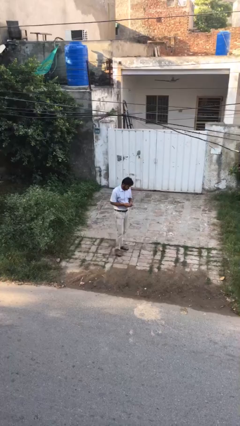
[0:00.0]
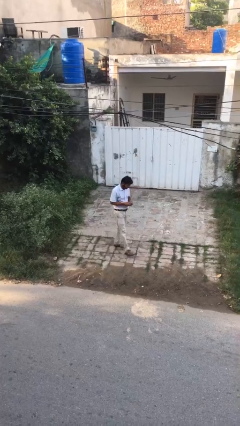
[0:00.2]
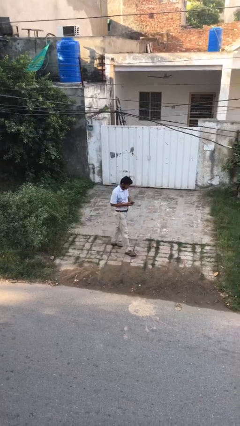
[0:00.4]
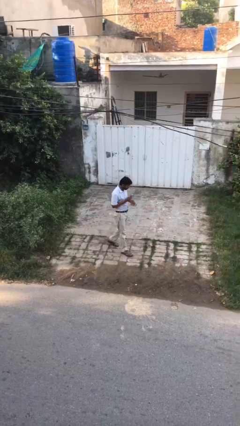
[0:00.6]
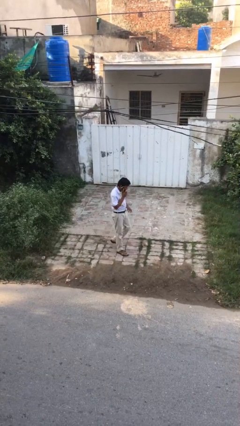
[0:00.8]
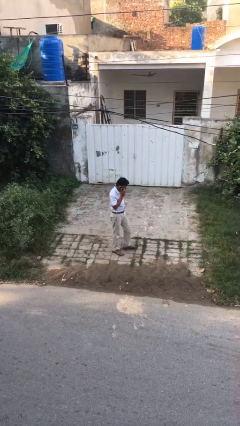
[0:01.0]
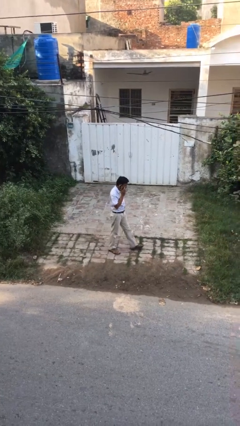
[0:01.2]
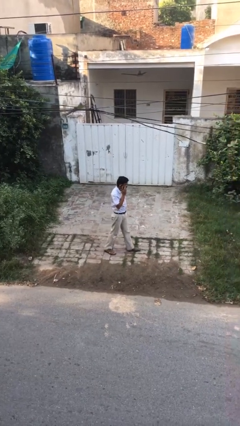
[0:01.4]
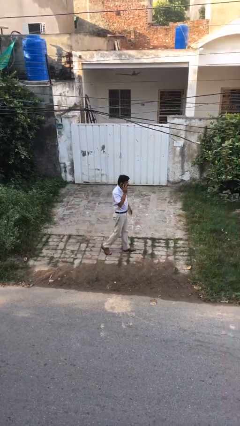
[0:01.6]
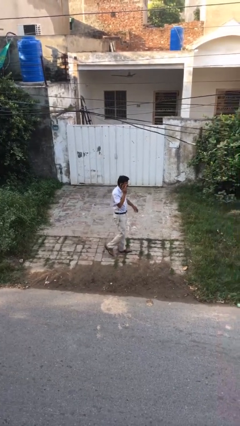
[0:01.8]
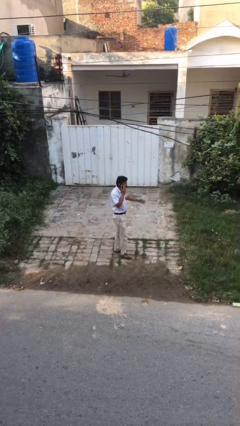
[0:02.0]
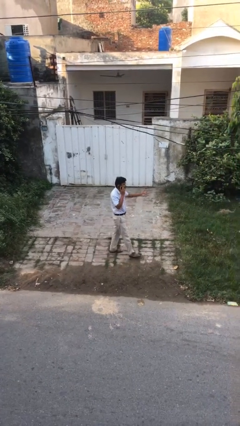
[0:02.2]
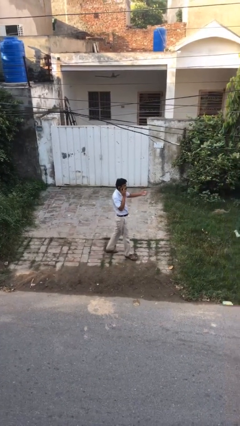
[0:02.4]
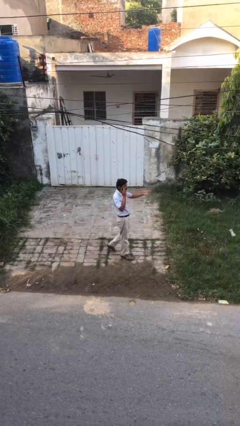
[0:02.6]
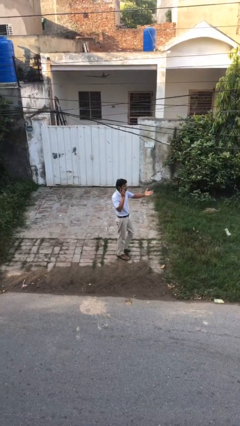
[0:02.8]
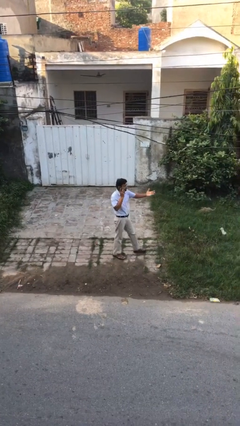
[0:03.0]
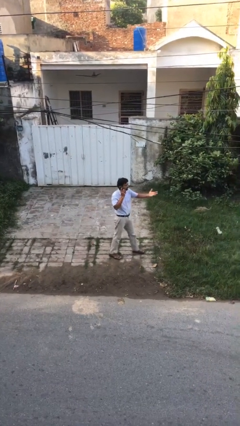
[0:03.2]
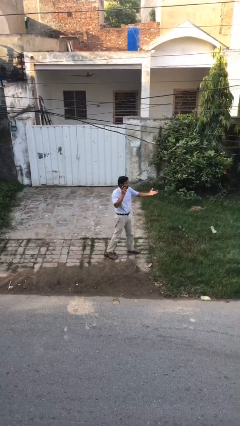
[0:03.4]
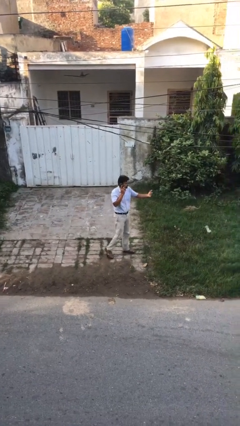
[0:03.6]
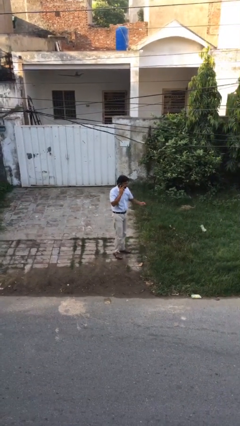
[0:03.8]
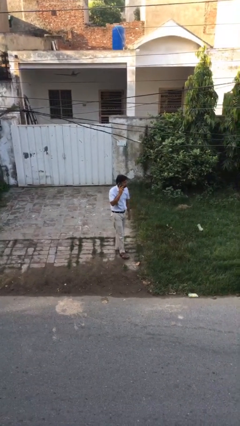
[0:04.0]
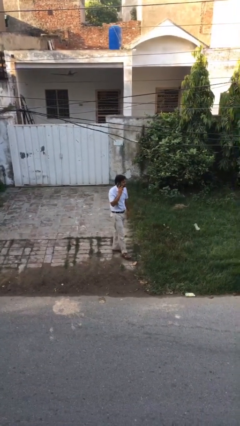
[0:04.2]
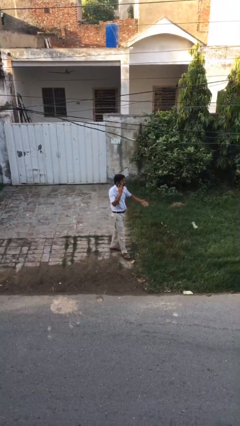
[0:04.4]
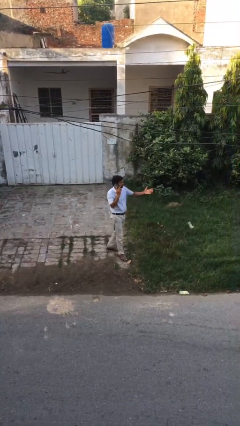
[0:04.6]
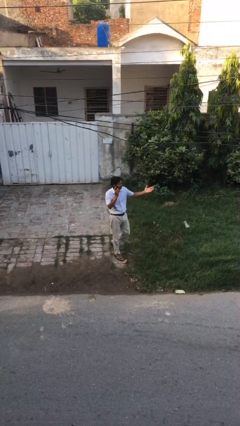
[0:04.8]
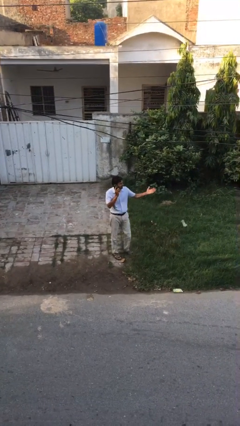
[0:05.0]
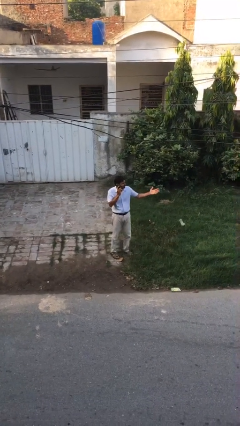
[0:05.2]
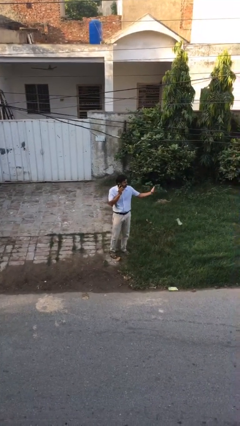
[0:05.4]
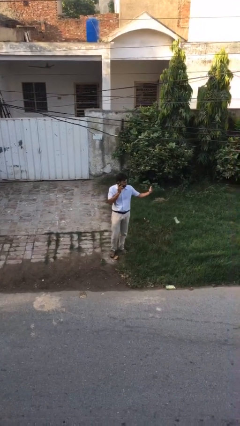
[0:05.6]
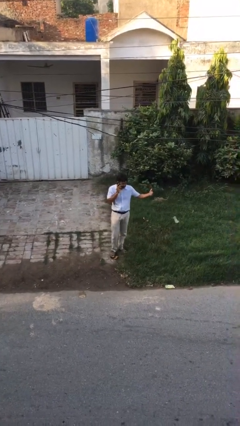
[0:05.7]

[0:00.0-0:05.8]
person talks on phone

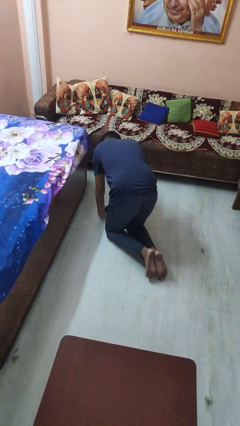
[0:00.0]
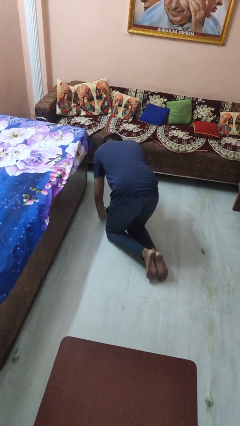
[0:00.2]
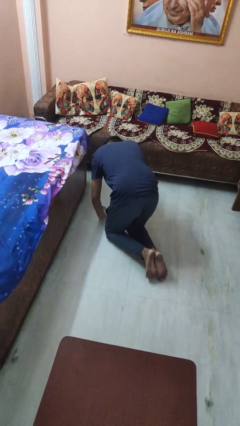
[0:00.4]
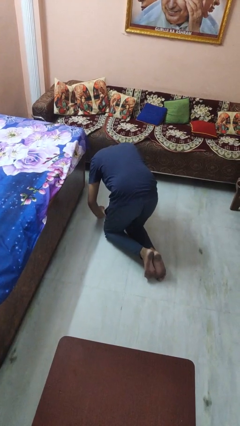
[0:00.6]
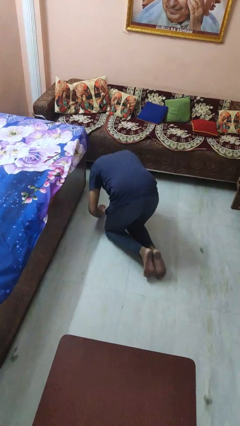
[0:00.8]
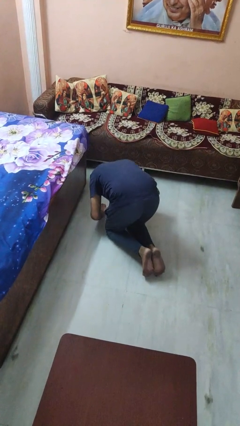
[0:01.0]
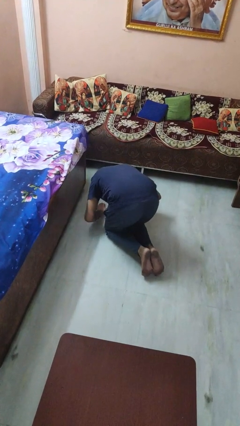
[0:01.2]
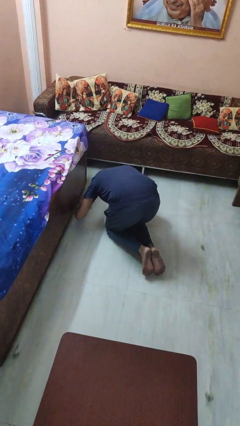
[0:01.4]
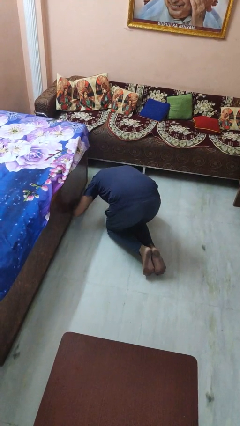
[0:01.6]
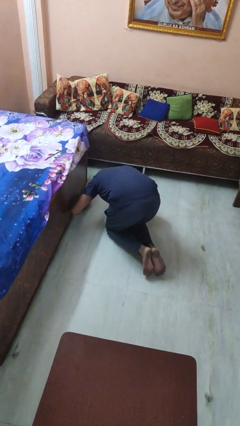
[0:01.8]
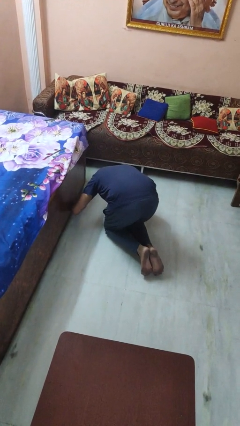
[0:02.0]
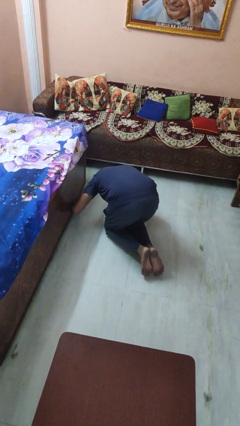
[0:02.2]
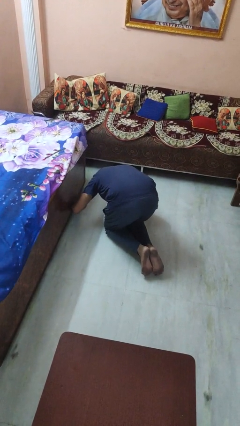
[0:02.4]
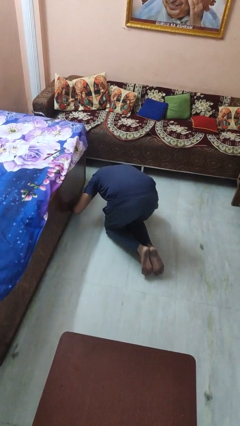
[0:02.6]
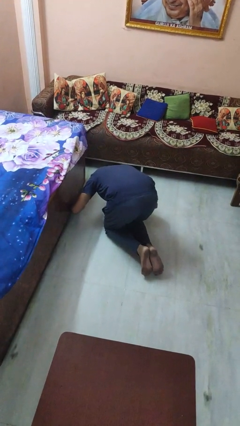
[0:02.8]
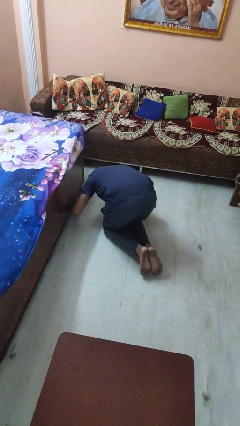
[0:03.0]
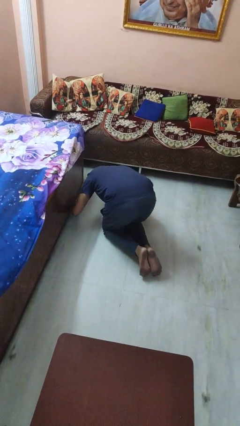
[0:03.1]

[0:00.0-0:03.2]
person searches under bed

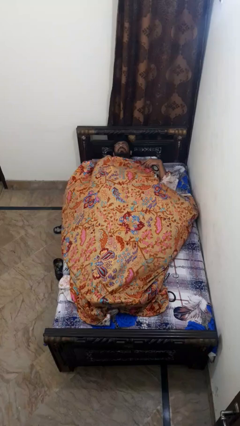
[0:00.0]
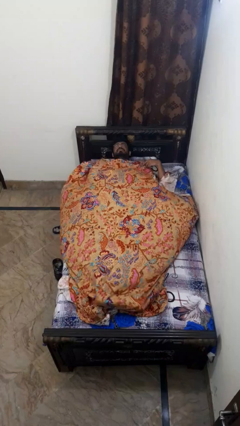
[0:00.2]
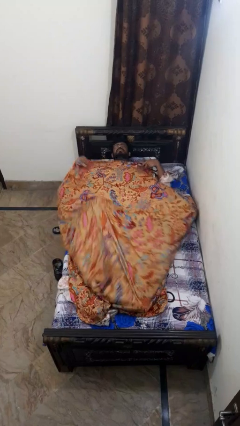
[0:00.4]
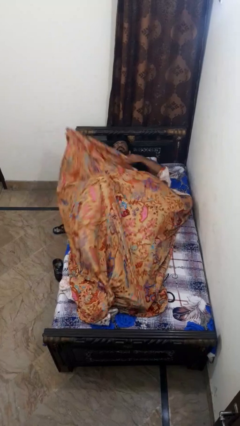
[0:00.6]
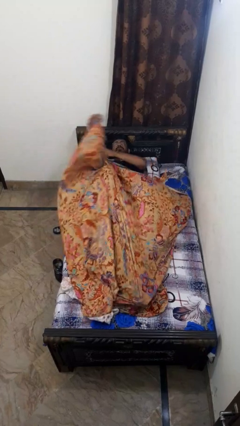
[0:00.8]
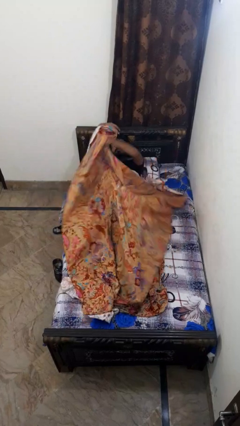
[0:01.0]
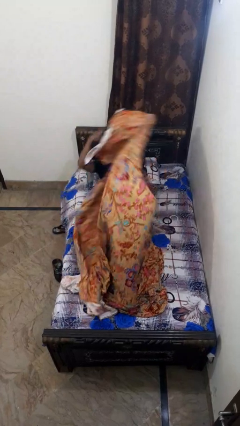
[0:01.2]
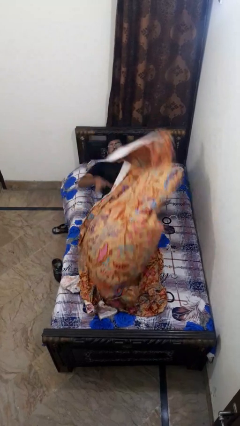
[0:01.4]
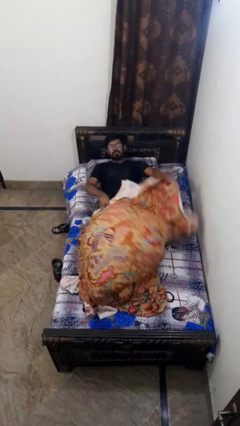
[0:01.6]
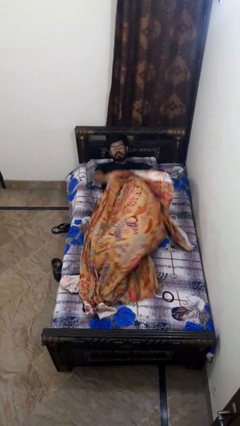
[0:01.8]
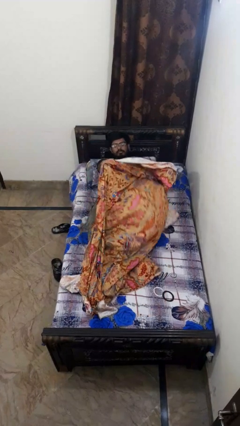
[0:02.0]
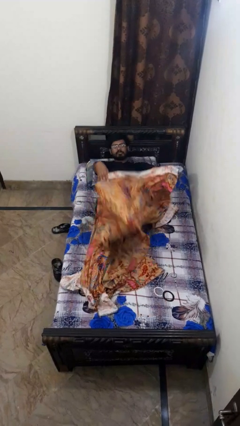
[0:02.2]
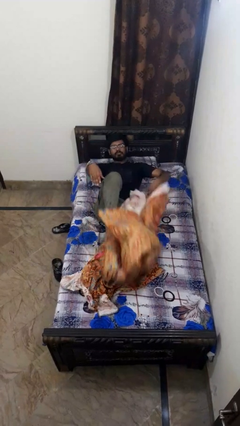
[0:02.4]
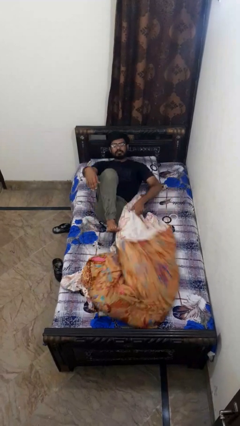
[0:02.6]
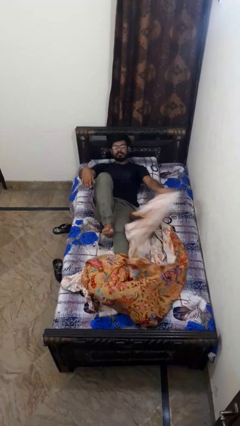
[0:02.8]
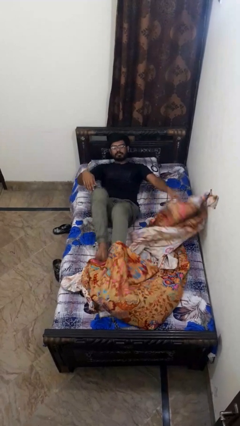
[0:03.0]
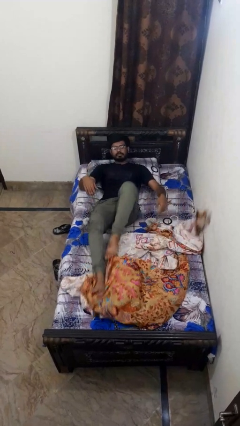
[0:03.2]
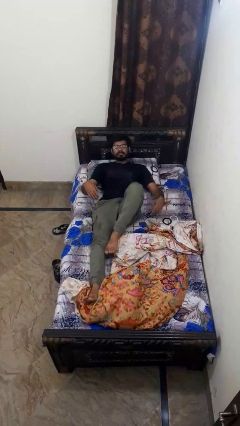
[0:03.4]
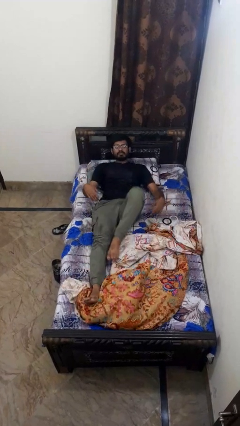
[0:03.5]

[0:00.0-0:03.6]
person uncovers with bedsheets

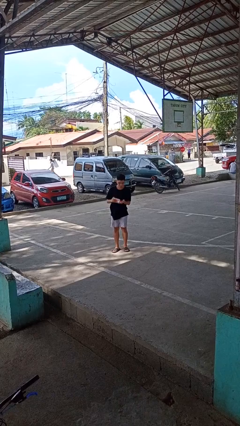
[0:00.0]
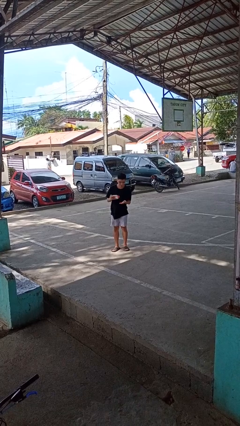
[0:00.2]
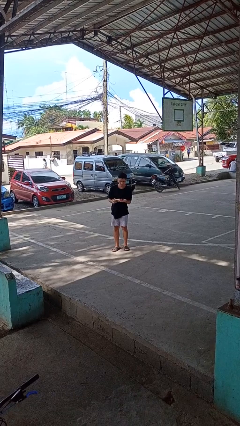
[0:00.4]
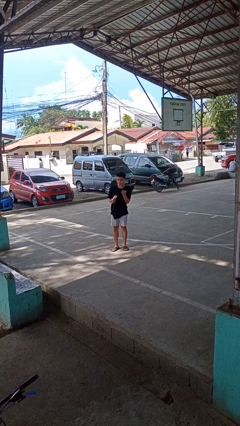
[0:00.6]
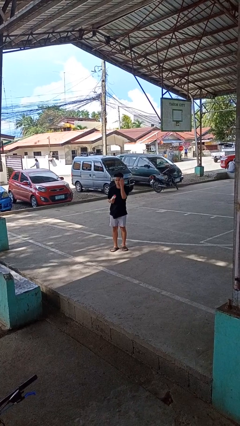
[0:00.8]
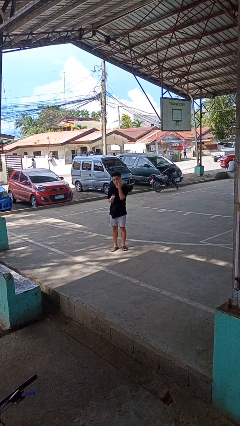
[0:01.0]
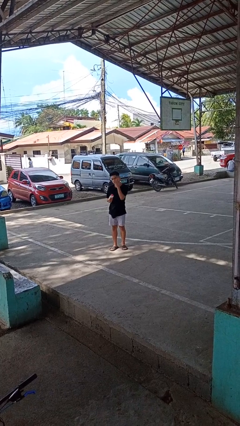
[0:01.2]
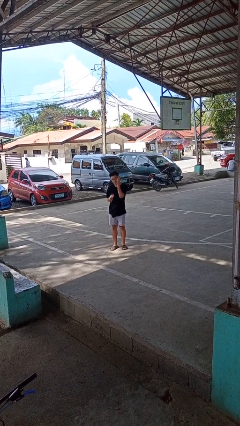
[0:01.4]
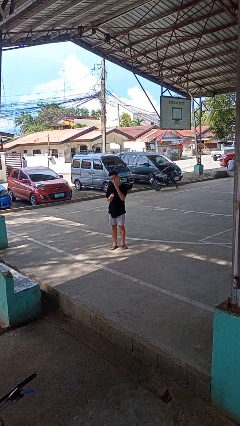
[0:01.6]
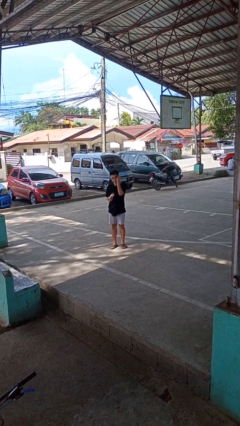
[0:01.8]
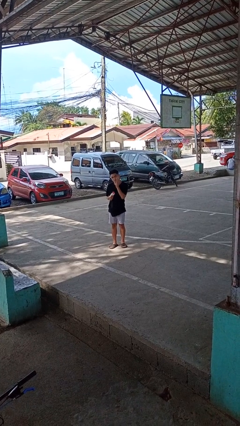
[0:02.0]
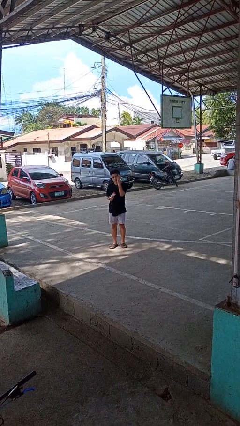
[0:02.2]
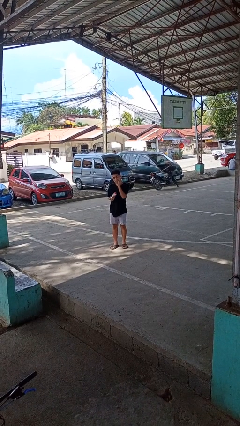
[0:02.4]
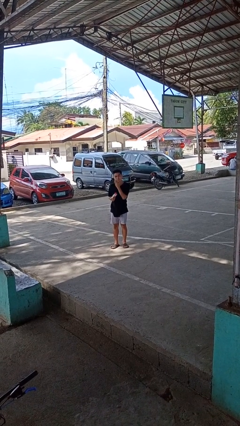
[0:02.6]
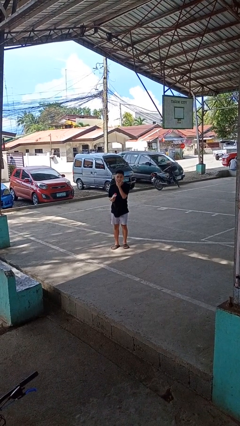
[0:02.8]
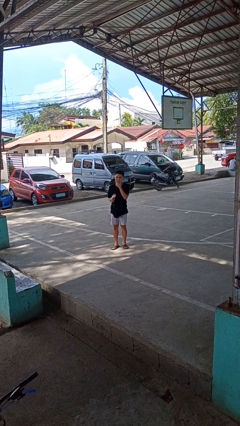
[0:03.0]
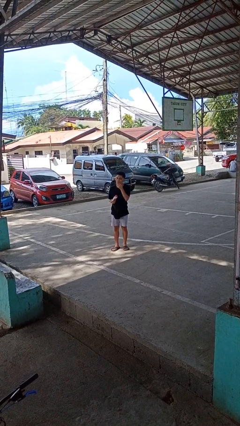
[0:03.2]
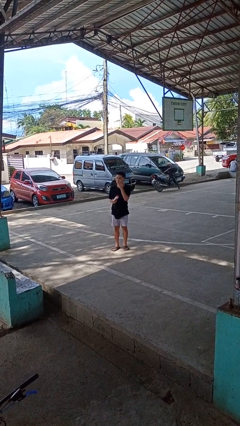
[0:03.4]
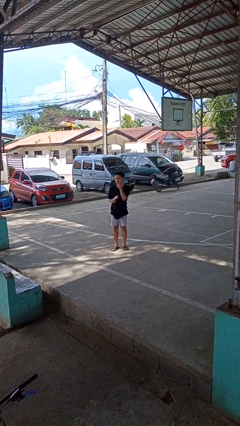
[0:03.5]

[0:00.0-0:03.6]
person applies facial moisturizer

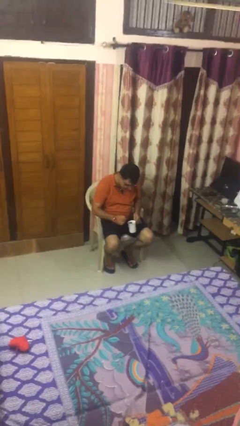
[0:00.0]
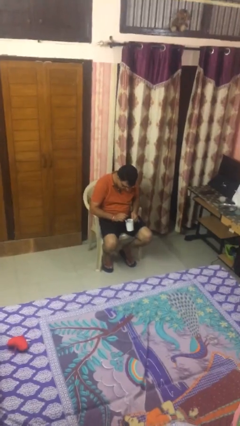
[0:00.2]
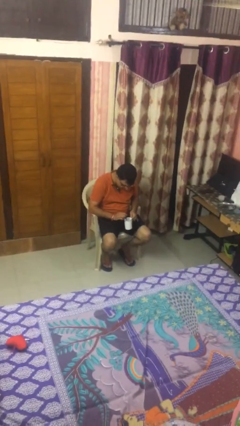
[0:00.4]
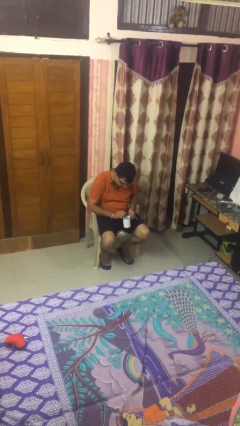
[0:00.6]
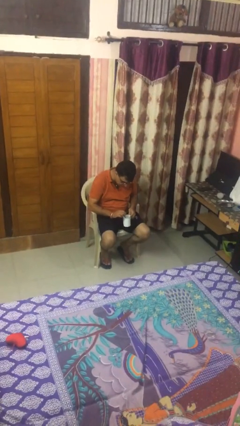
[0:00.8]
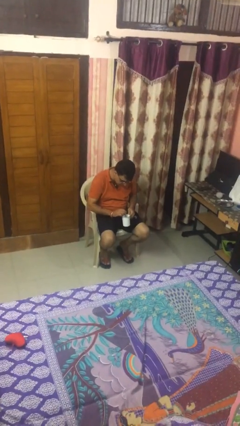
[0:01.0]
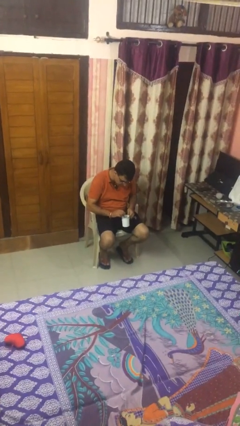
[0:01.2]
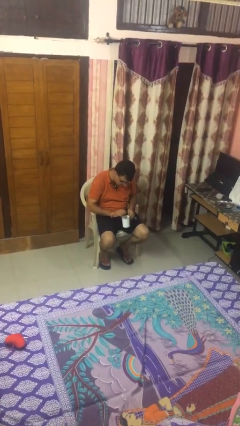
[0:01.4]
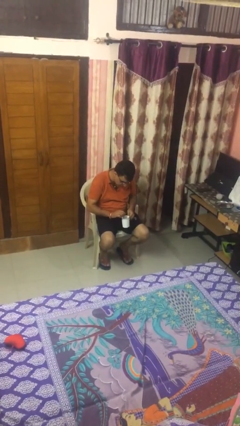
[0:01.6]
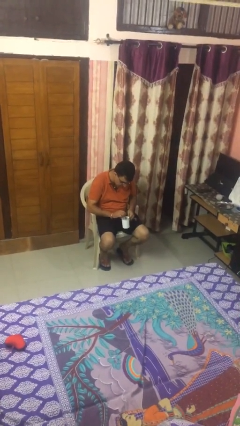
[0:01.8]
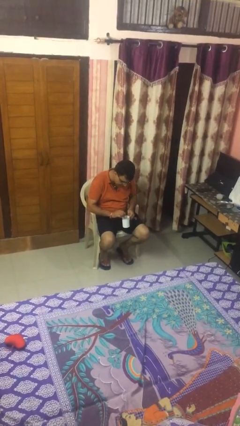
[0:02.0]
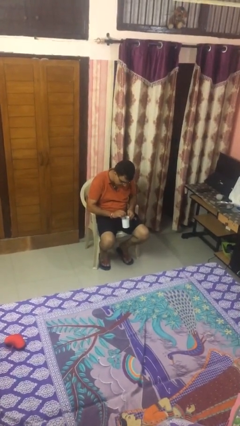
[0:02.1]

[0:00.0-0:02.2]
person stirs mug
